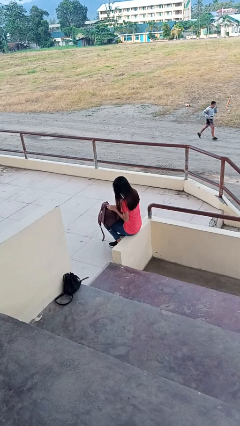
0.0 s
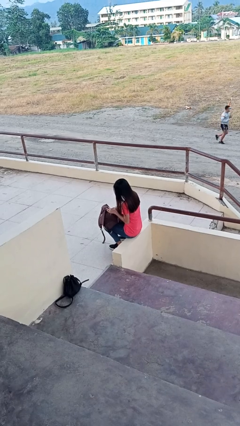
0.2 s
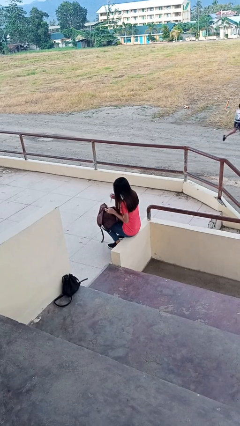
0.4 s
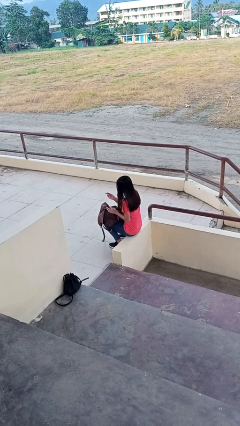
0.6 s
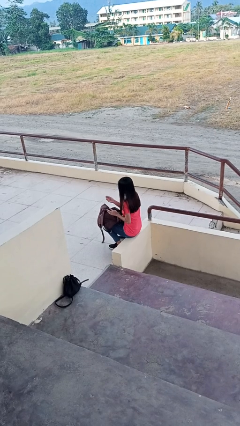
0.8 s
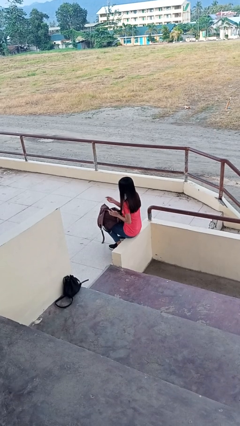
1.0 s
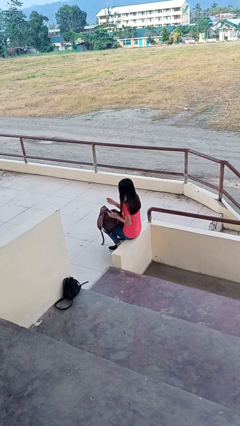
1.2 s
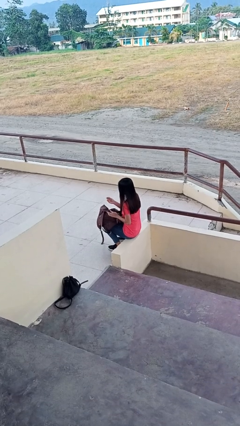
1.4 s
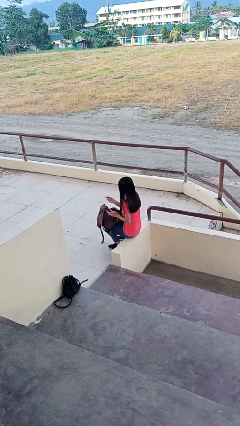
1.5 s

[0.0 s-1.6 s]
person takes object from backpack

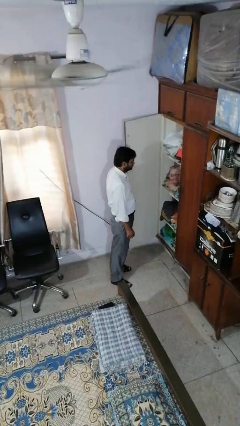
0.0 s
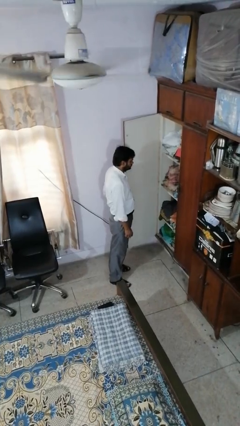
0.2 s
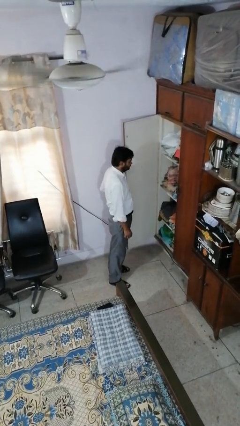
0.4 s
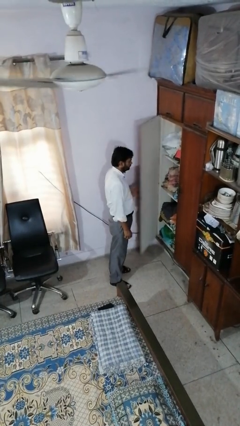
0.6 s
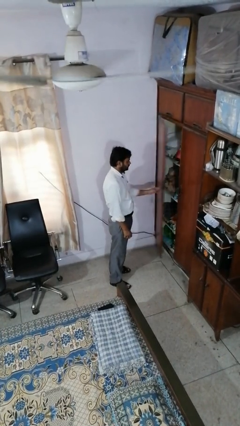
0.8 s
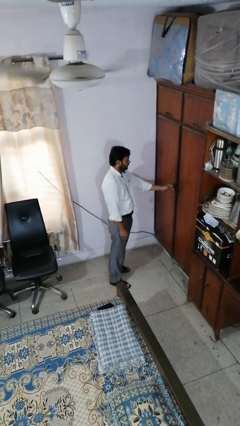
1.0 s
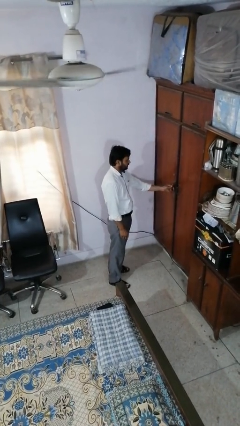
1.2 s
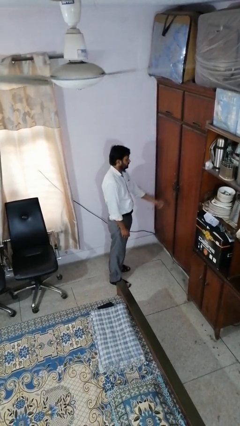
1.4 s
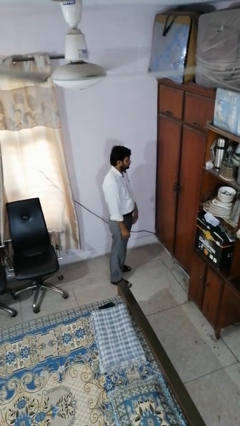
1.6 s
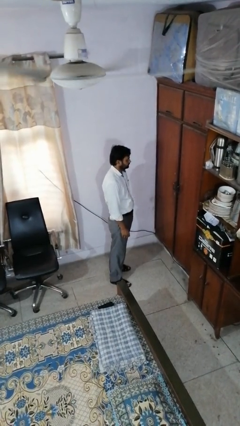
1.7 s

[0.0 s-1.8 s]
person closes closet door

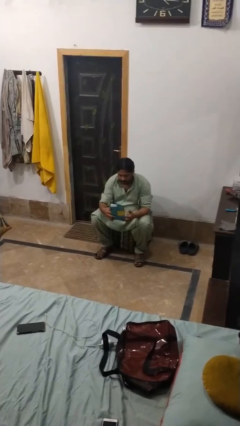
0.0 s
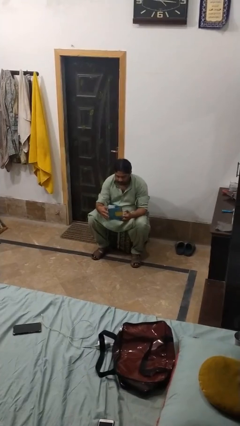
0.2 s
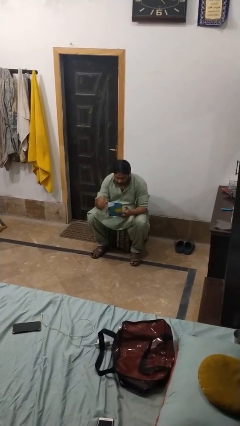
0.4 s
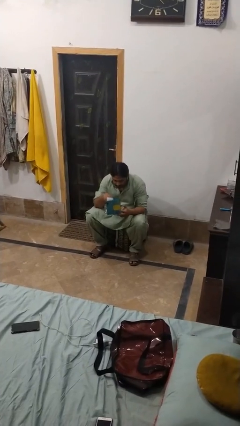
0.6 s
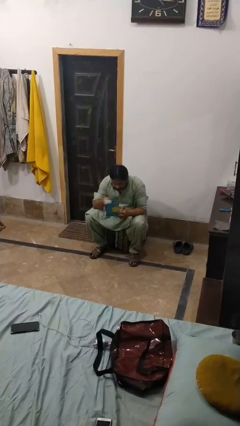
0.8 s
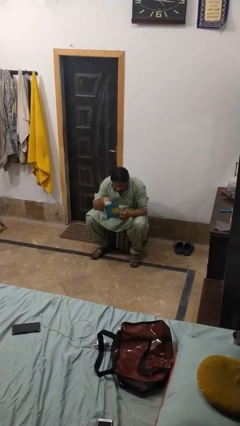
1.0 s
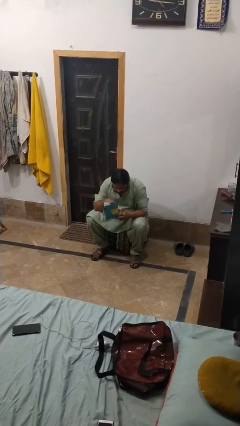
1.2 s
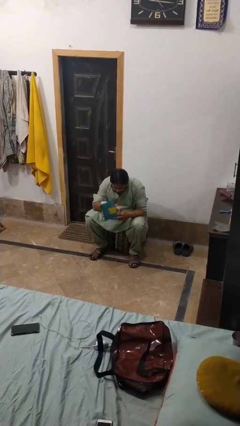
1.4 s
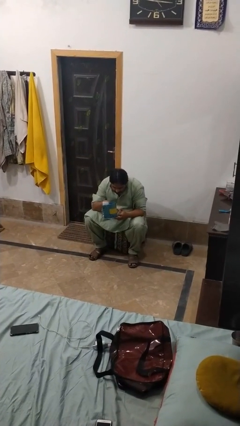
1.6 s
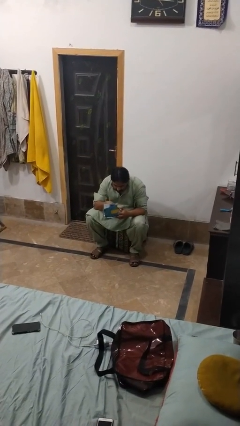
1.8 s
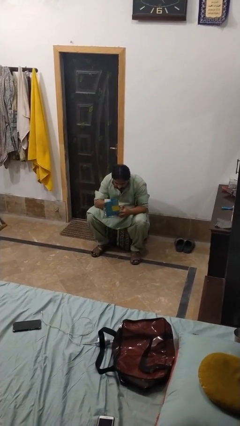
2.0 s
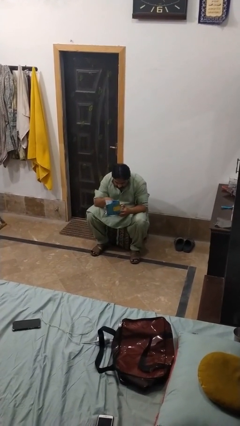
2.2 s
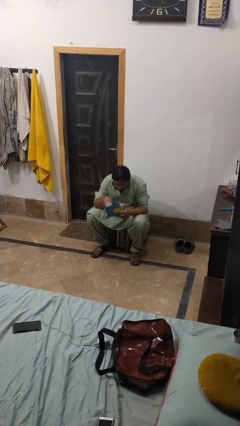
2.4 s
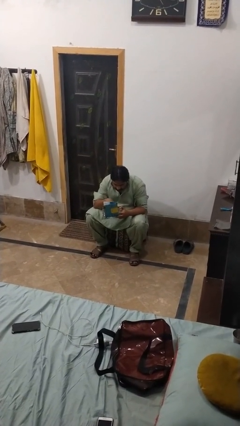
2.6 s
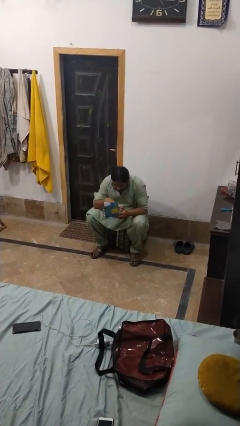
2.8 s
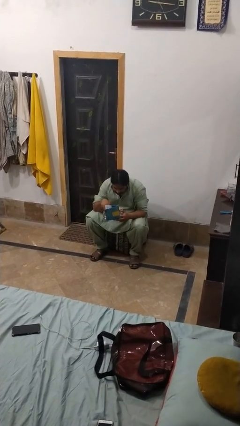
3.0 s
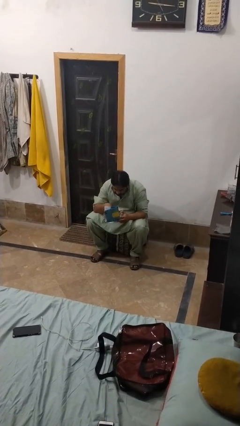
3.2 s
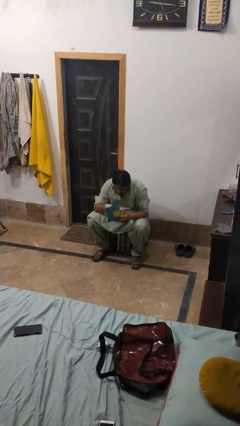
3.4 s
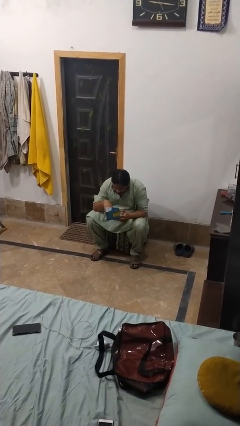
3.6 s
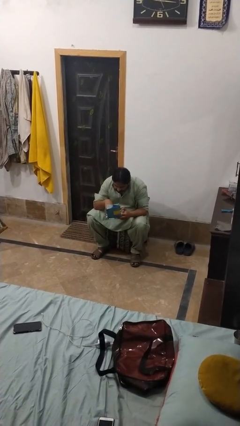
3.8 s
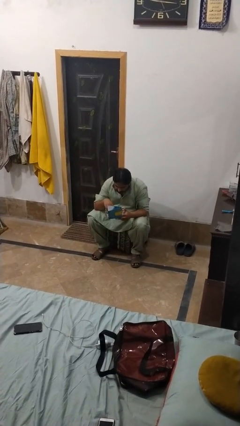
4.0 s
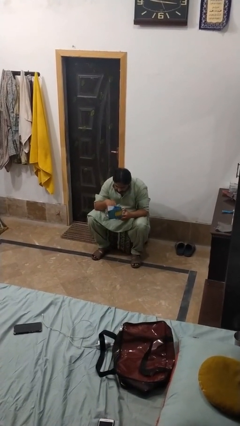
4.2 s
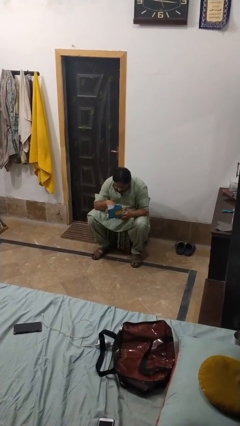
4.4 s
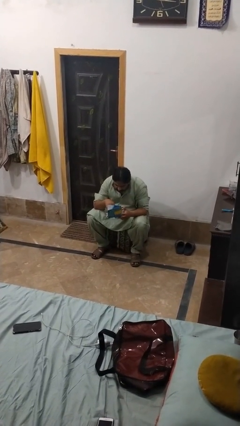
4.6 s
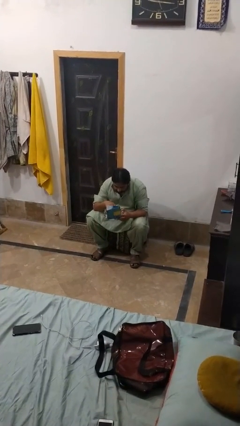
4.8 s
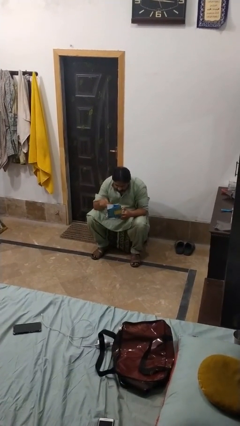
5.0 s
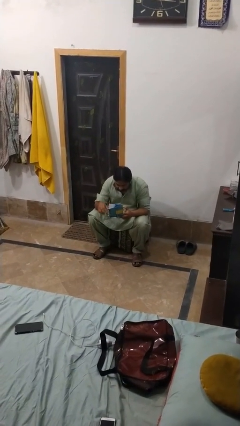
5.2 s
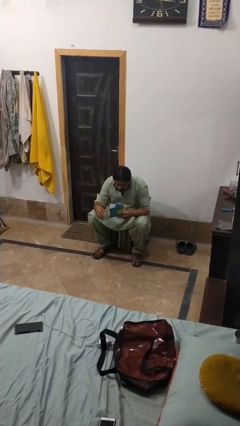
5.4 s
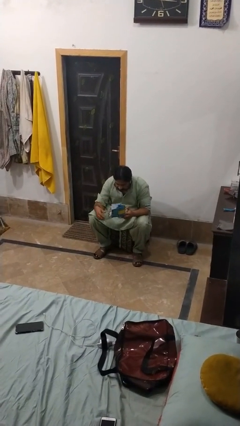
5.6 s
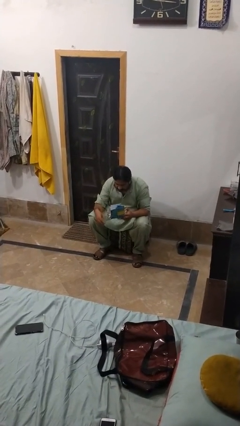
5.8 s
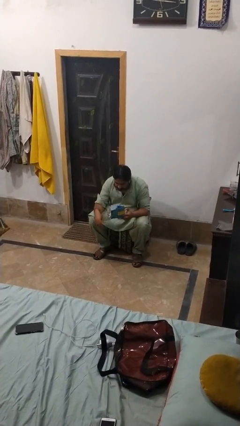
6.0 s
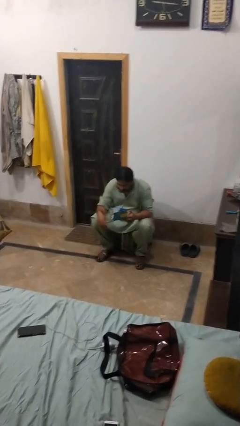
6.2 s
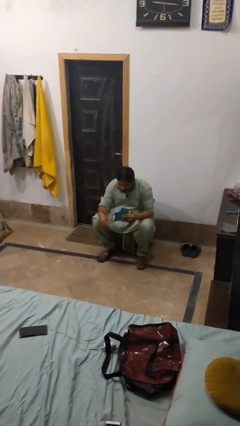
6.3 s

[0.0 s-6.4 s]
person searches jewelry box

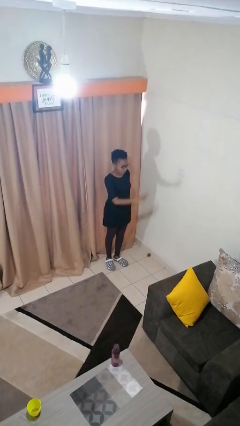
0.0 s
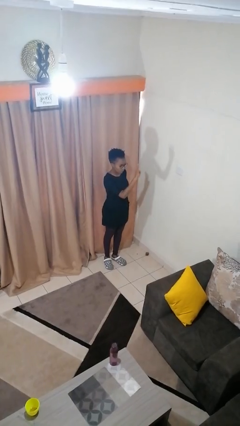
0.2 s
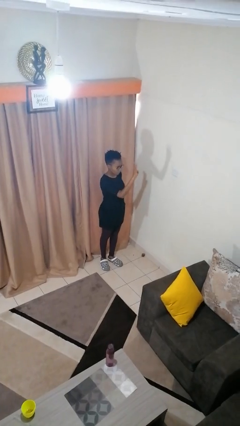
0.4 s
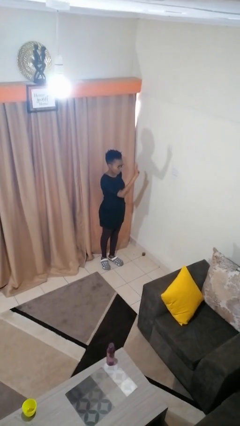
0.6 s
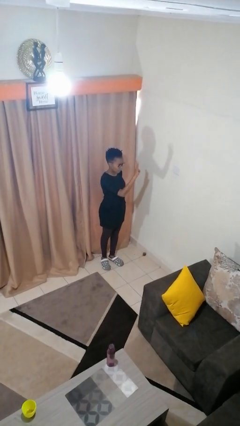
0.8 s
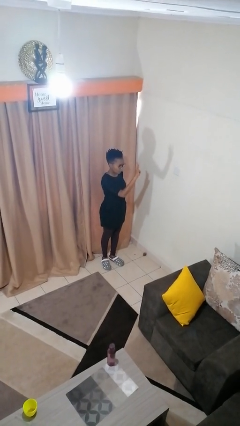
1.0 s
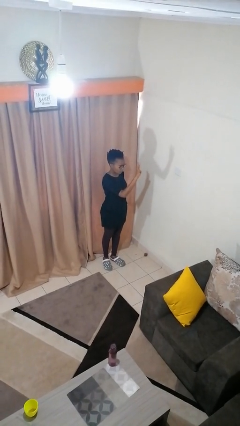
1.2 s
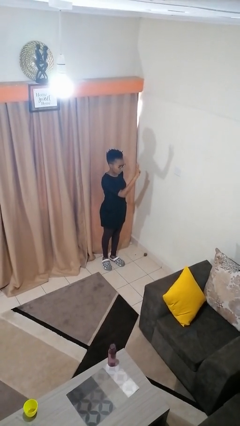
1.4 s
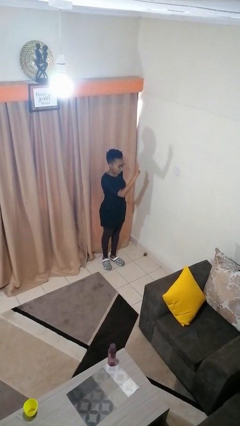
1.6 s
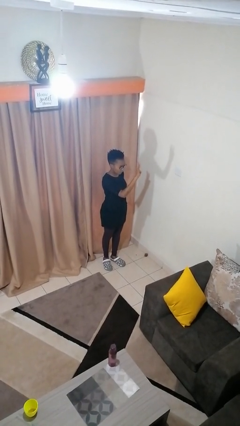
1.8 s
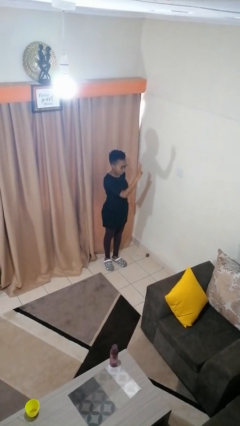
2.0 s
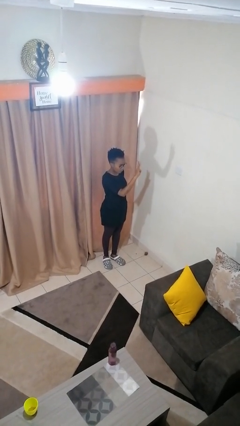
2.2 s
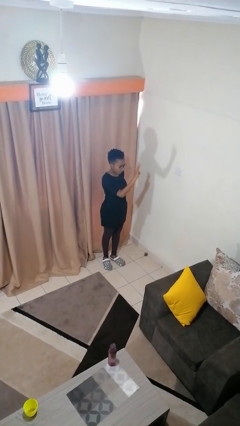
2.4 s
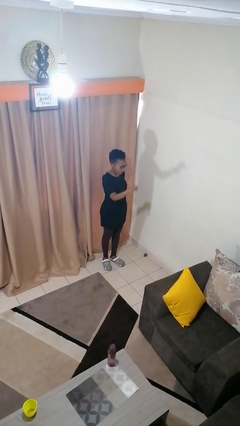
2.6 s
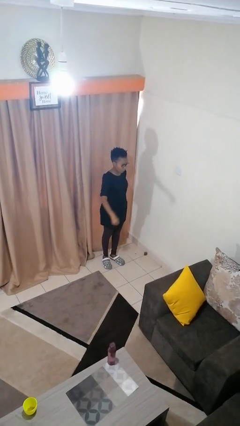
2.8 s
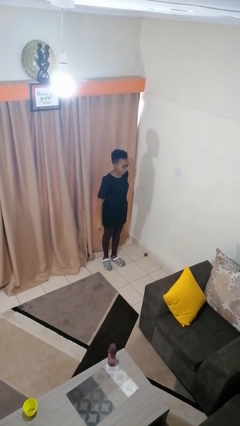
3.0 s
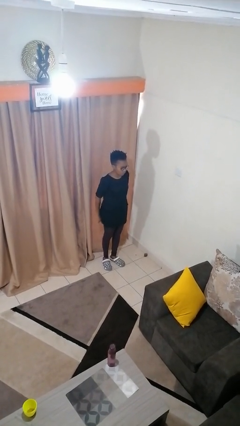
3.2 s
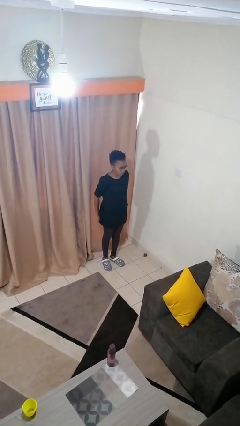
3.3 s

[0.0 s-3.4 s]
person gestures number three

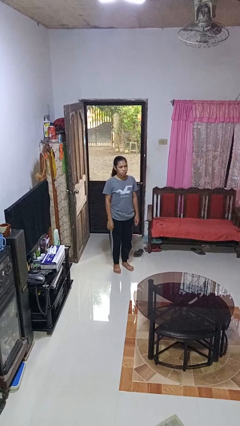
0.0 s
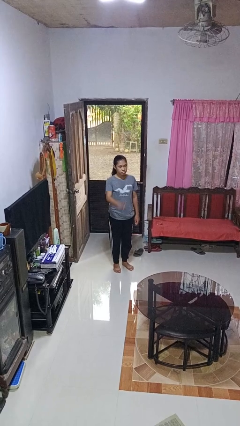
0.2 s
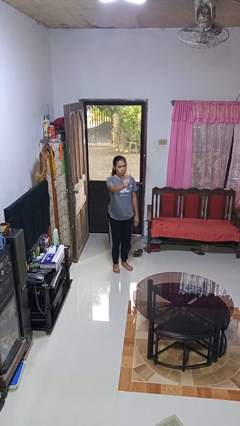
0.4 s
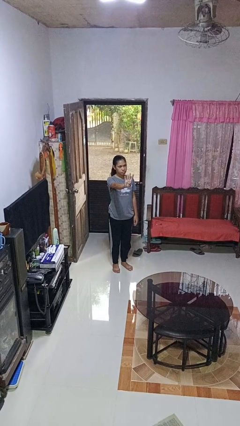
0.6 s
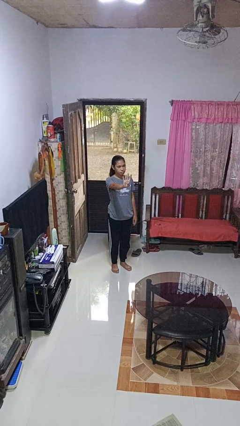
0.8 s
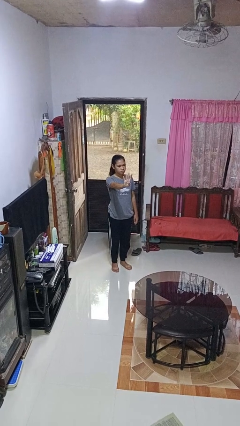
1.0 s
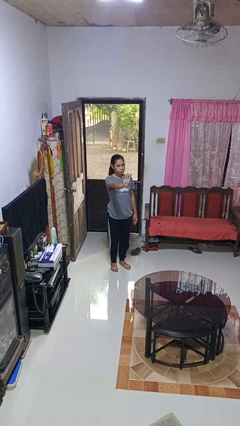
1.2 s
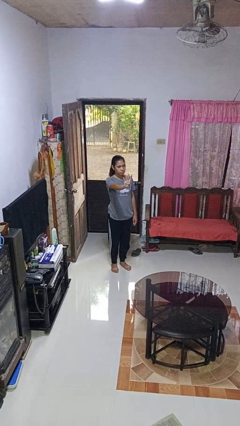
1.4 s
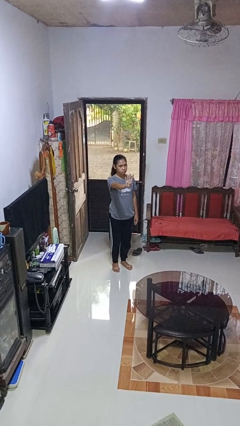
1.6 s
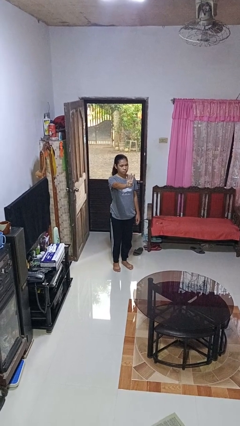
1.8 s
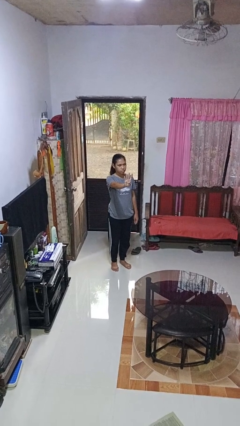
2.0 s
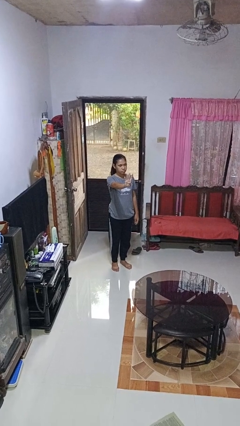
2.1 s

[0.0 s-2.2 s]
person gestures number four

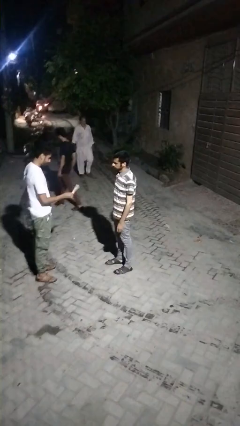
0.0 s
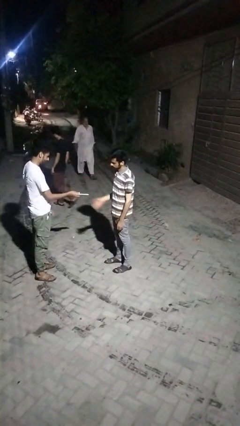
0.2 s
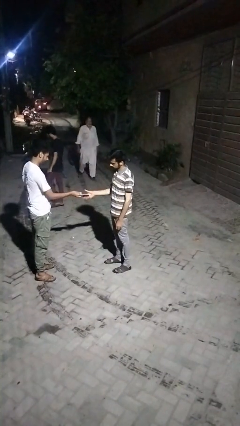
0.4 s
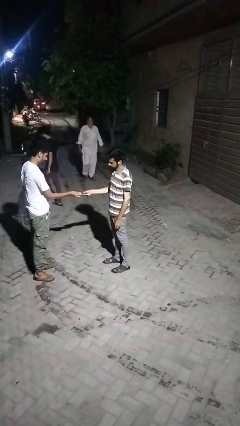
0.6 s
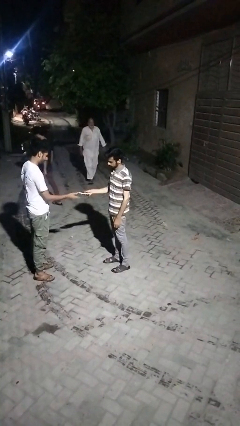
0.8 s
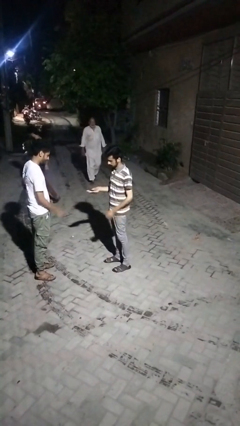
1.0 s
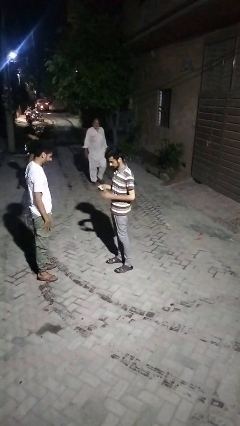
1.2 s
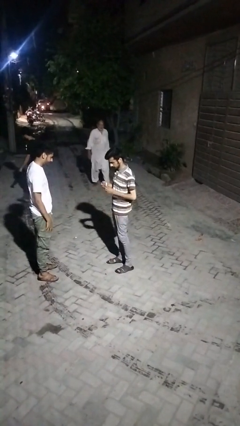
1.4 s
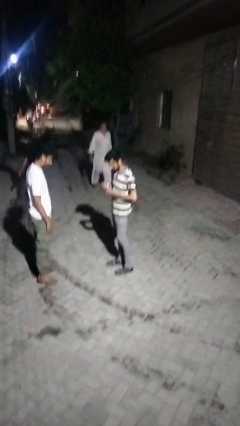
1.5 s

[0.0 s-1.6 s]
person transfers object to person
